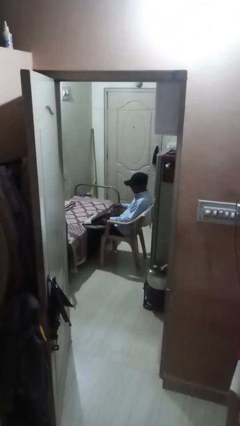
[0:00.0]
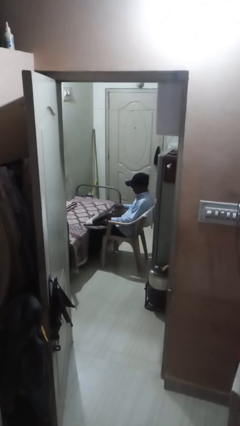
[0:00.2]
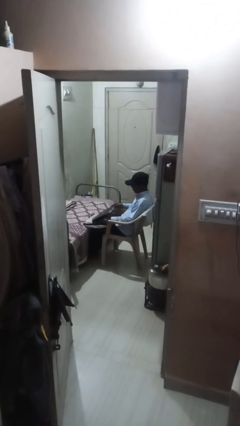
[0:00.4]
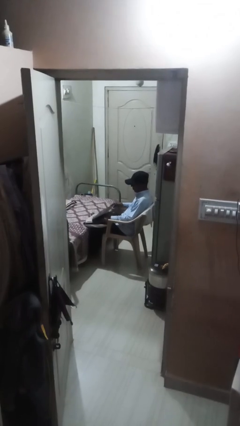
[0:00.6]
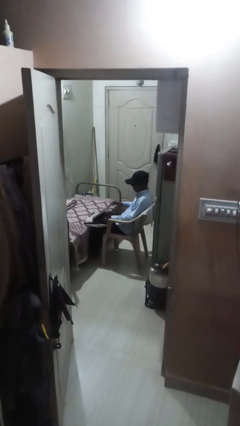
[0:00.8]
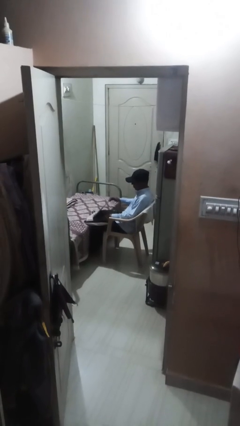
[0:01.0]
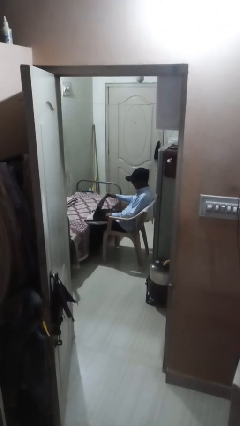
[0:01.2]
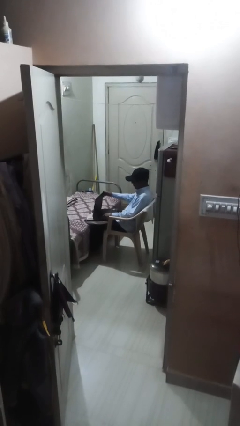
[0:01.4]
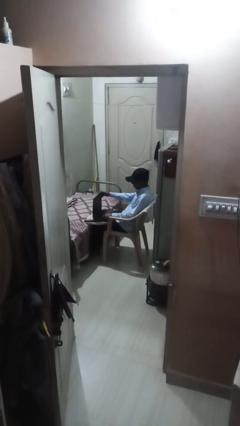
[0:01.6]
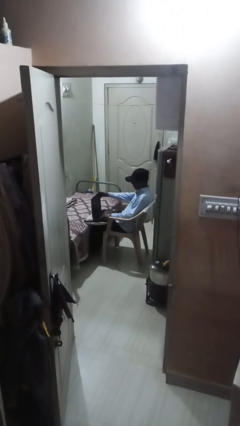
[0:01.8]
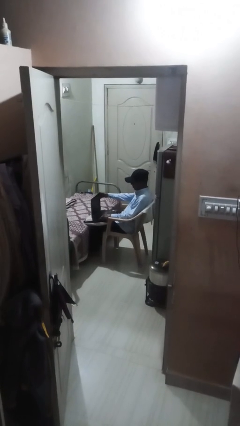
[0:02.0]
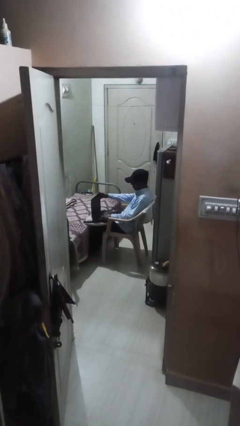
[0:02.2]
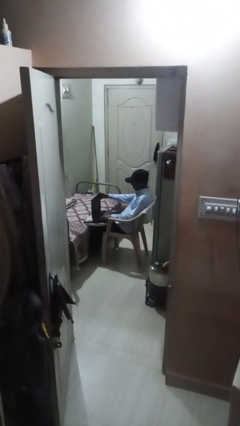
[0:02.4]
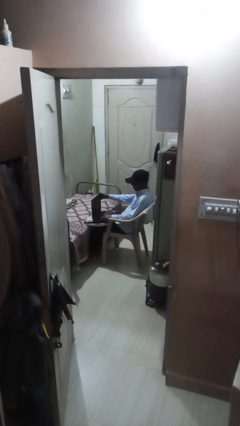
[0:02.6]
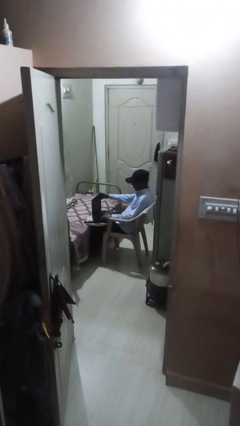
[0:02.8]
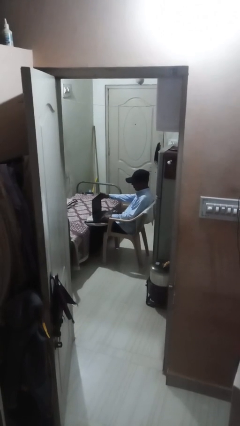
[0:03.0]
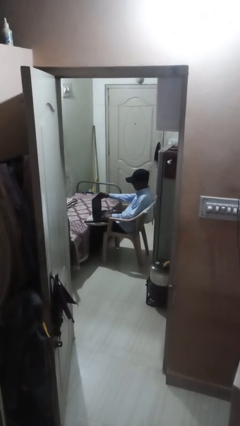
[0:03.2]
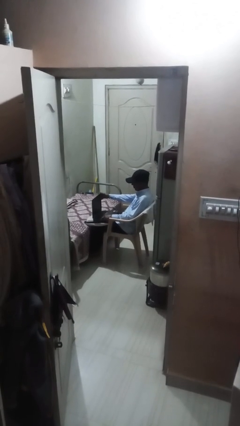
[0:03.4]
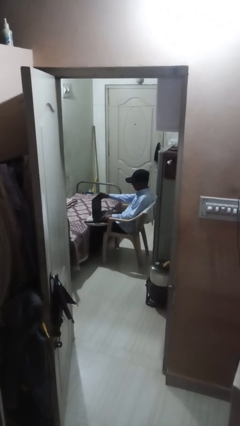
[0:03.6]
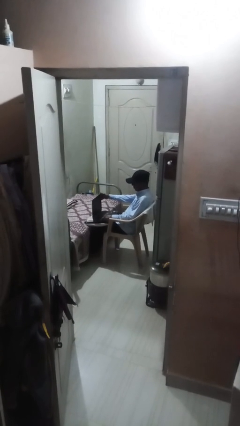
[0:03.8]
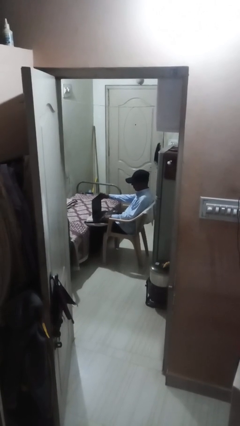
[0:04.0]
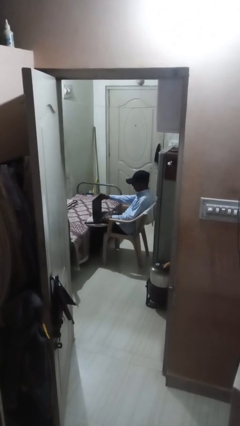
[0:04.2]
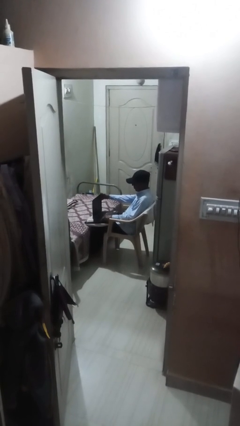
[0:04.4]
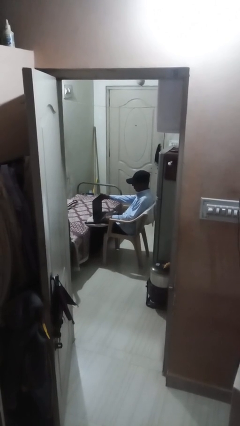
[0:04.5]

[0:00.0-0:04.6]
person interacts with laptop

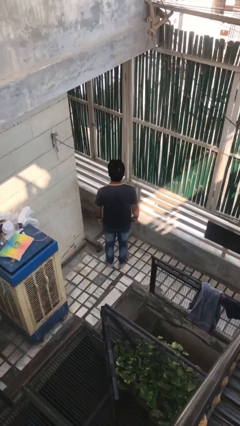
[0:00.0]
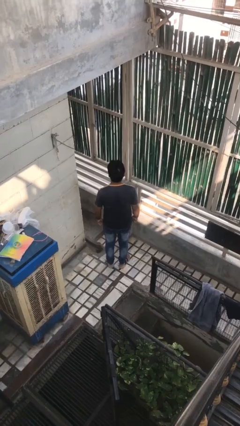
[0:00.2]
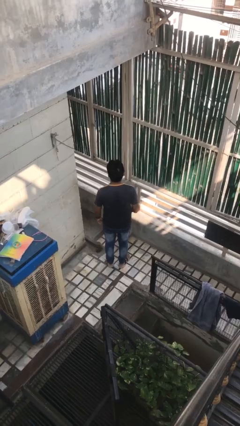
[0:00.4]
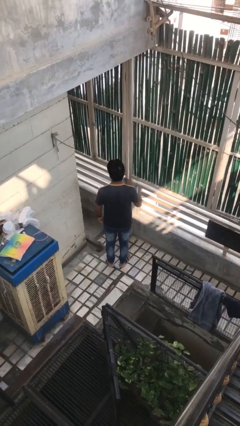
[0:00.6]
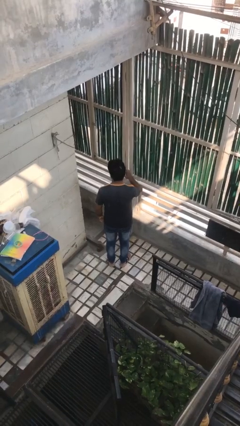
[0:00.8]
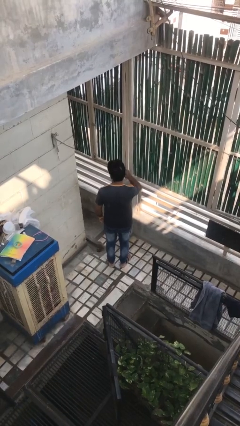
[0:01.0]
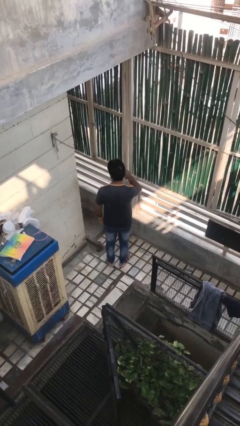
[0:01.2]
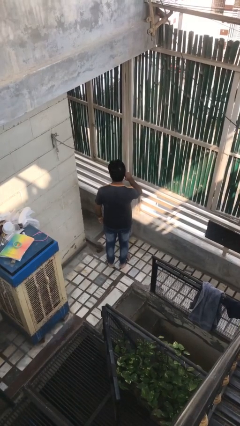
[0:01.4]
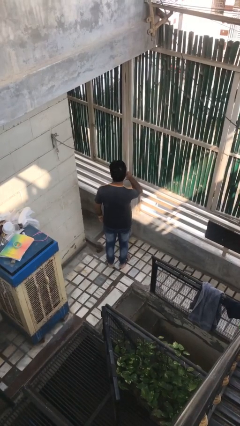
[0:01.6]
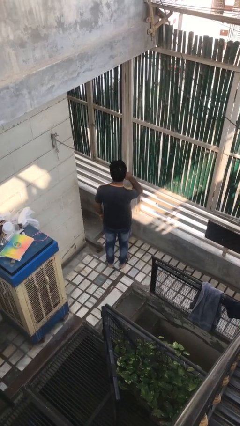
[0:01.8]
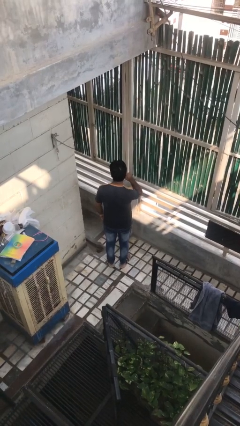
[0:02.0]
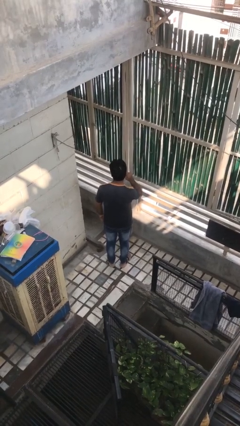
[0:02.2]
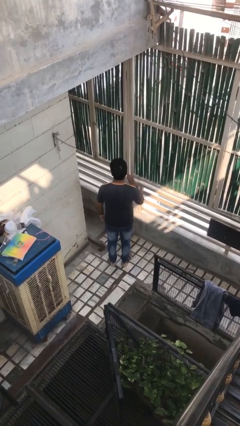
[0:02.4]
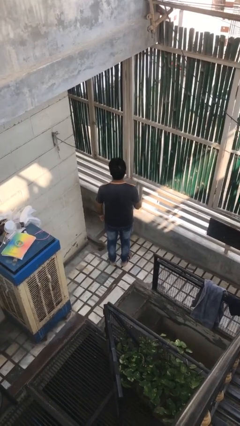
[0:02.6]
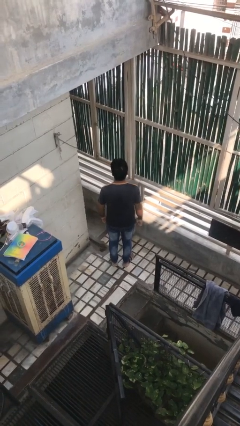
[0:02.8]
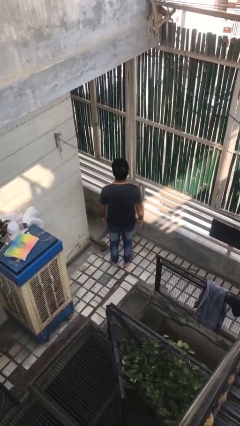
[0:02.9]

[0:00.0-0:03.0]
person touches earlobe

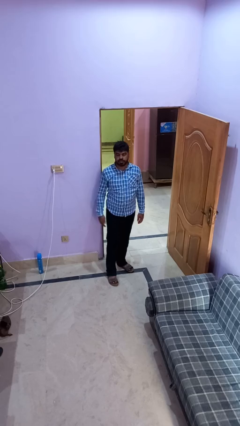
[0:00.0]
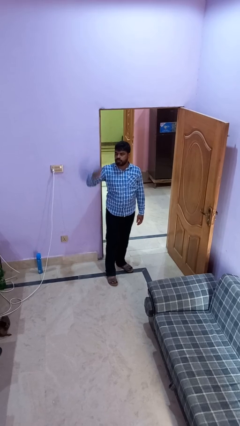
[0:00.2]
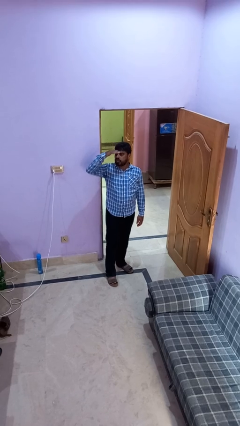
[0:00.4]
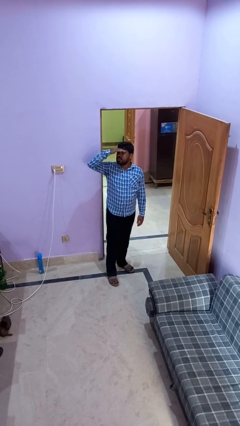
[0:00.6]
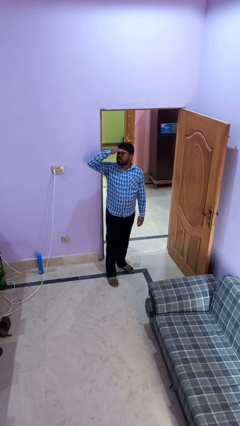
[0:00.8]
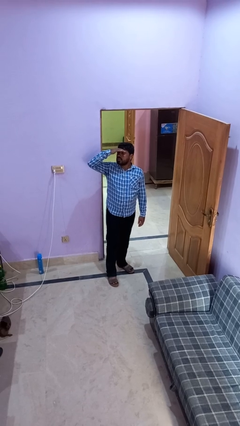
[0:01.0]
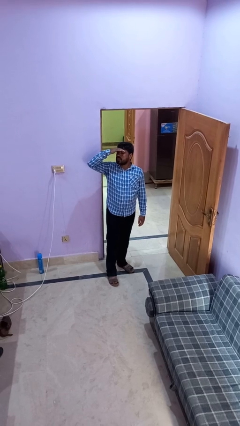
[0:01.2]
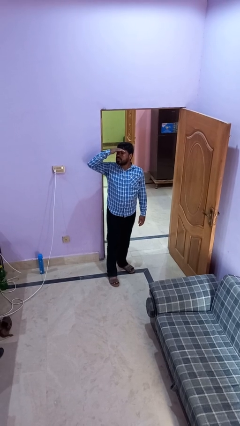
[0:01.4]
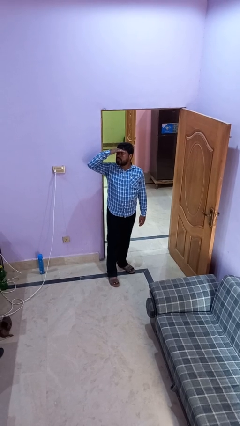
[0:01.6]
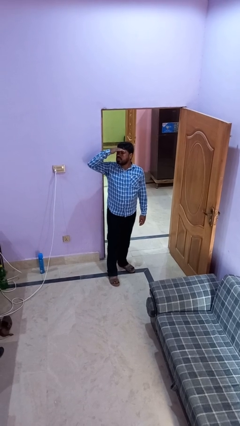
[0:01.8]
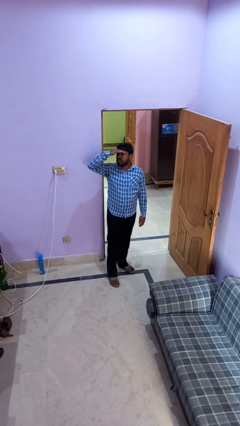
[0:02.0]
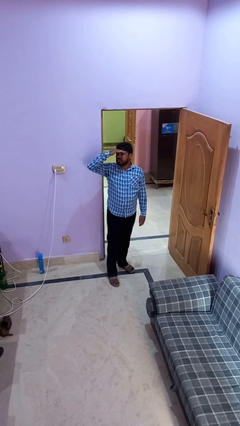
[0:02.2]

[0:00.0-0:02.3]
person shades eyes

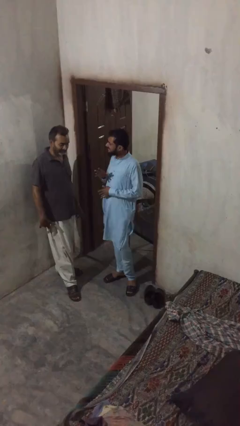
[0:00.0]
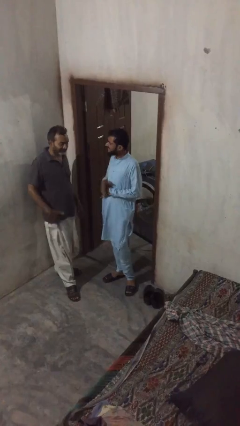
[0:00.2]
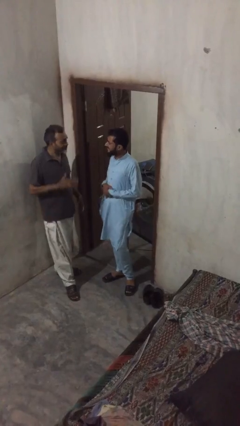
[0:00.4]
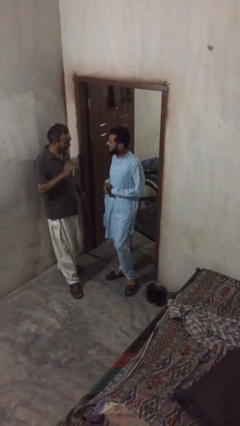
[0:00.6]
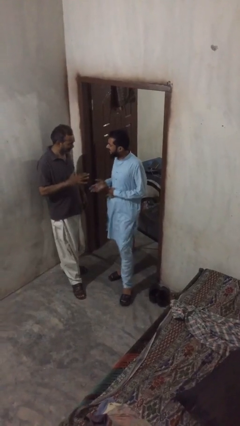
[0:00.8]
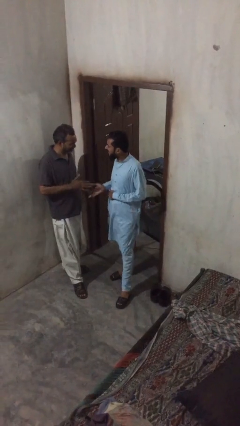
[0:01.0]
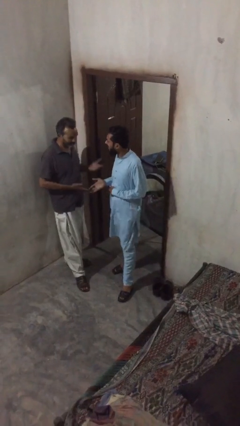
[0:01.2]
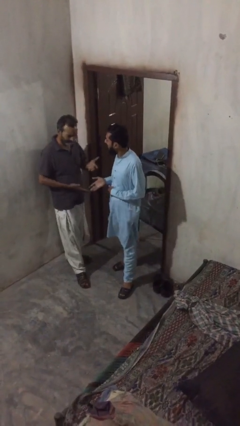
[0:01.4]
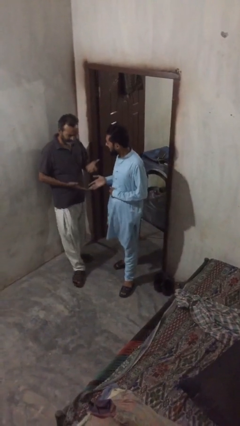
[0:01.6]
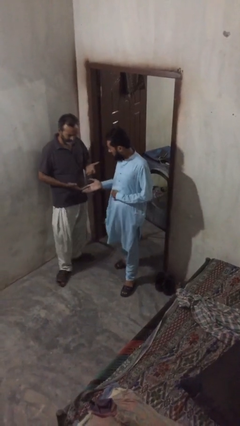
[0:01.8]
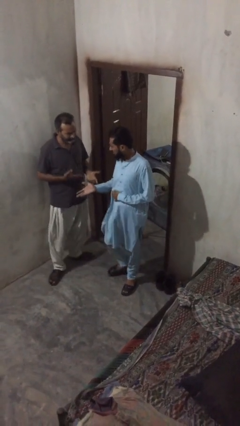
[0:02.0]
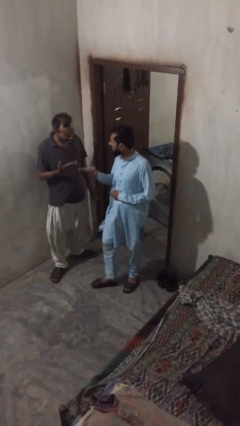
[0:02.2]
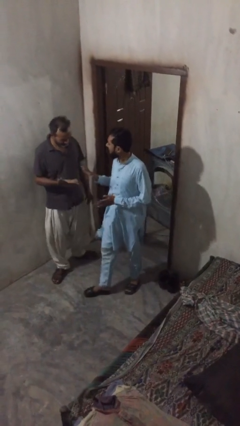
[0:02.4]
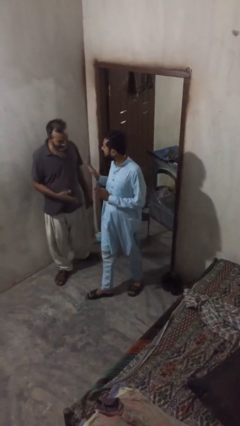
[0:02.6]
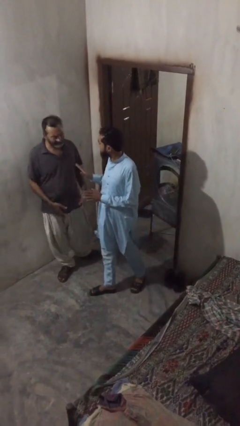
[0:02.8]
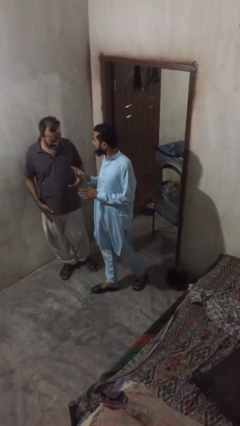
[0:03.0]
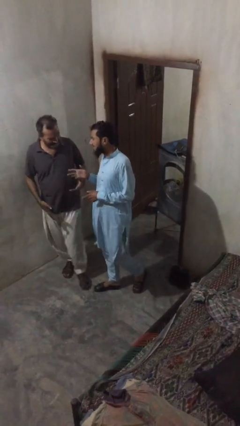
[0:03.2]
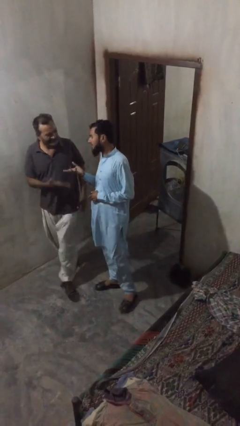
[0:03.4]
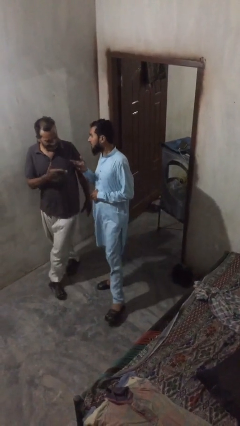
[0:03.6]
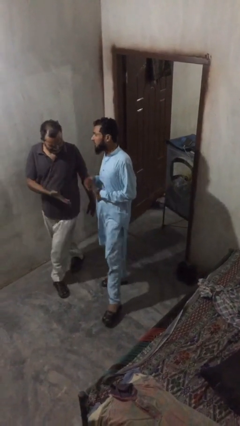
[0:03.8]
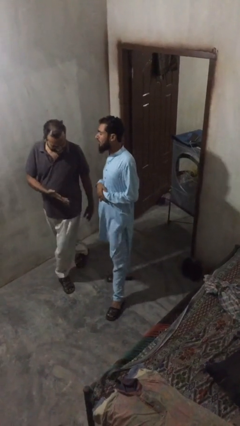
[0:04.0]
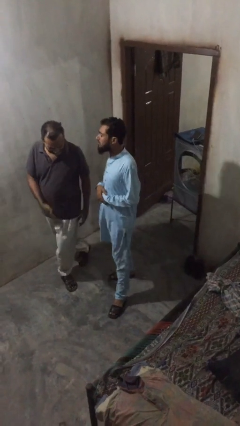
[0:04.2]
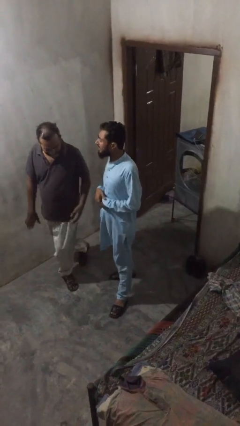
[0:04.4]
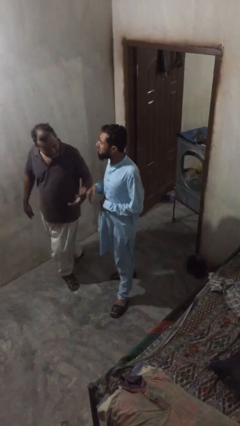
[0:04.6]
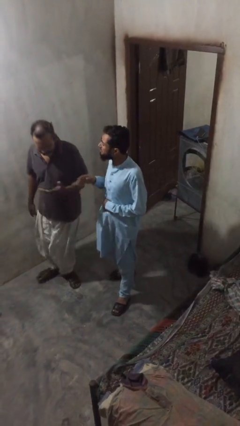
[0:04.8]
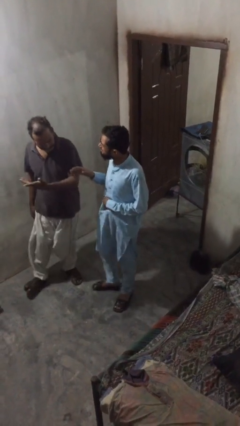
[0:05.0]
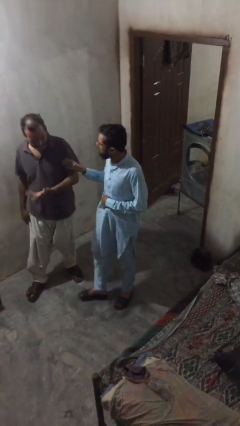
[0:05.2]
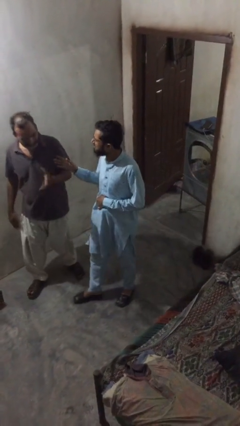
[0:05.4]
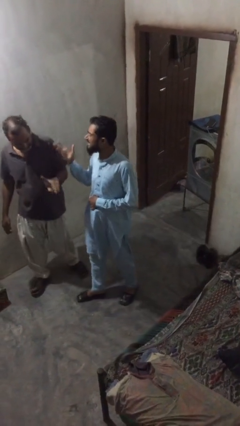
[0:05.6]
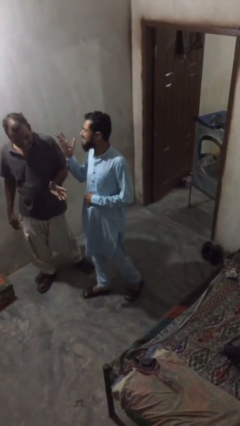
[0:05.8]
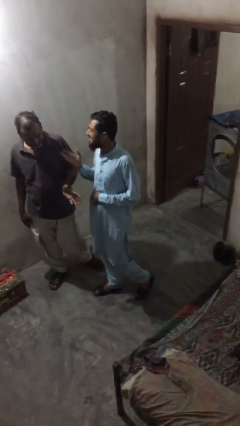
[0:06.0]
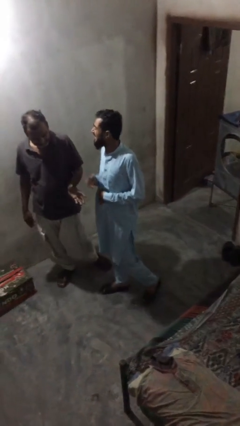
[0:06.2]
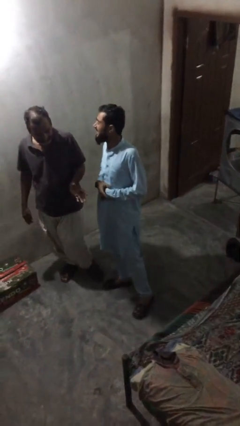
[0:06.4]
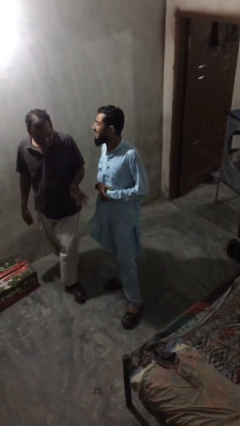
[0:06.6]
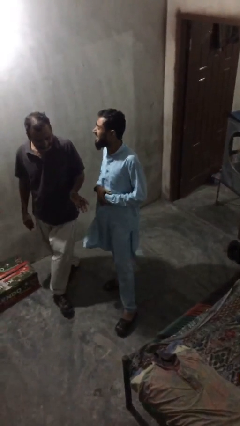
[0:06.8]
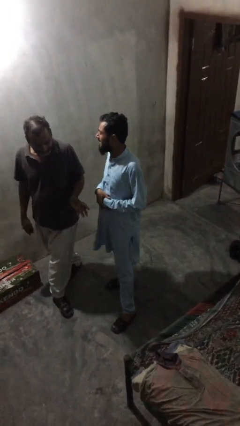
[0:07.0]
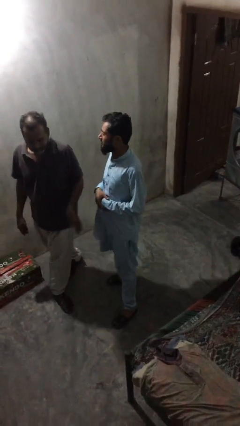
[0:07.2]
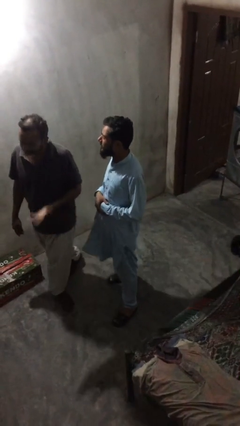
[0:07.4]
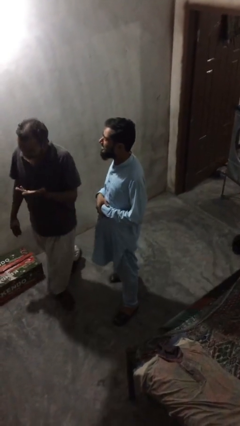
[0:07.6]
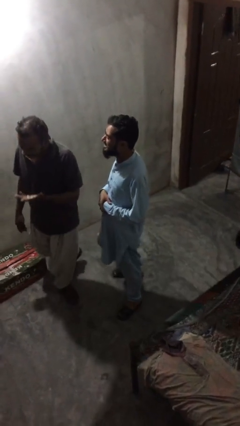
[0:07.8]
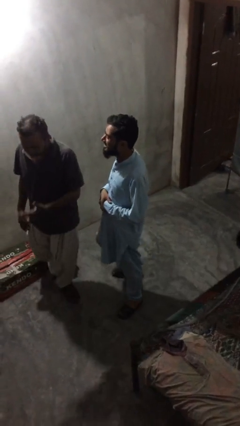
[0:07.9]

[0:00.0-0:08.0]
person talks to person

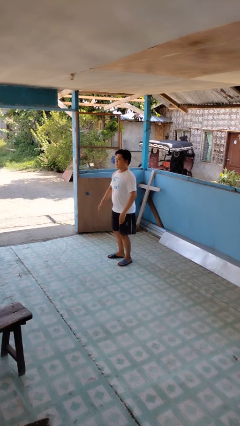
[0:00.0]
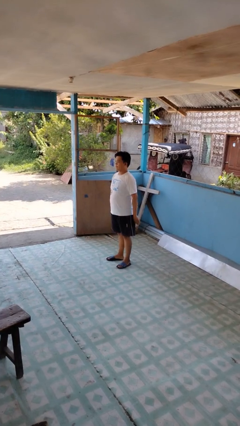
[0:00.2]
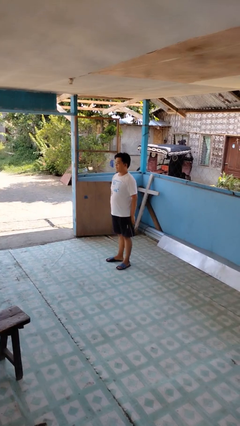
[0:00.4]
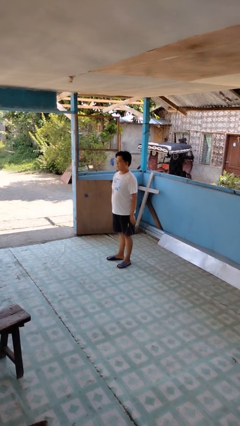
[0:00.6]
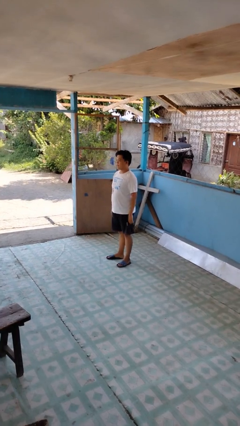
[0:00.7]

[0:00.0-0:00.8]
person stands up
